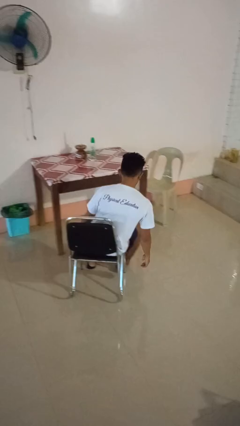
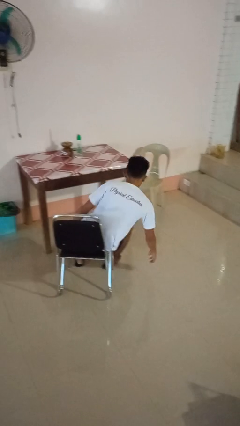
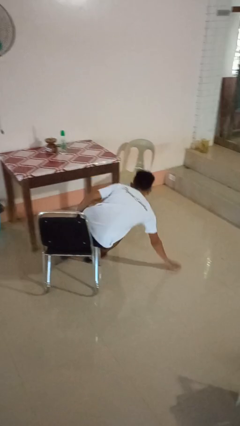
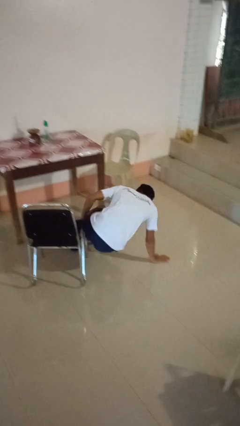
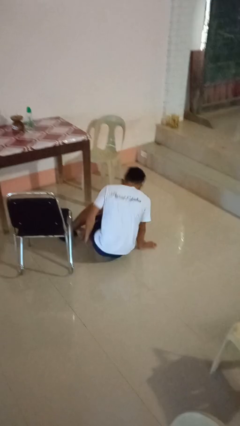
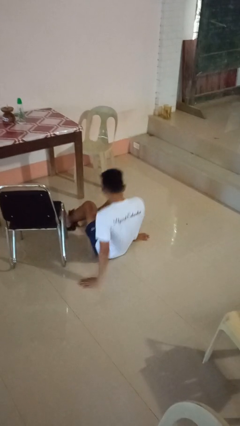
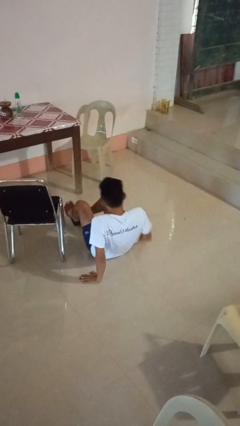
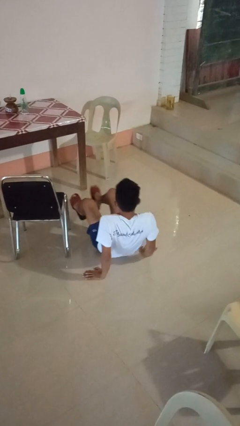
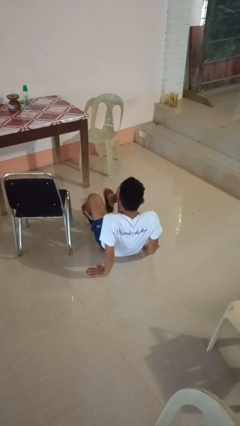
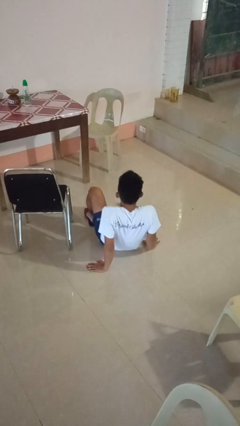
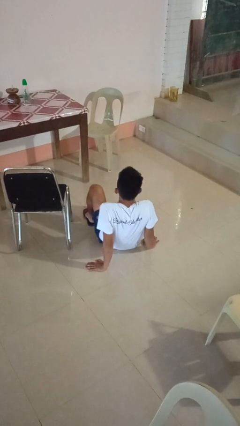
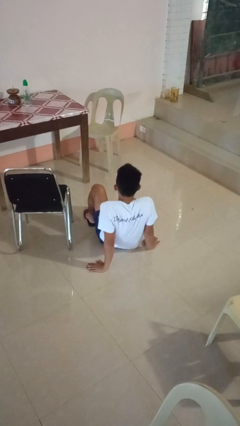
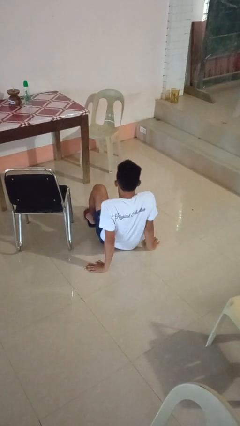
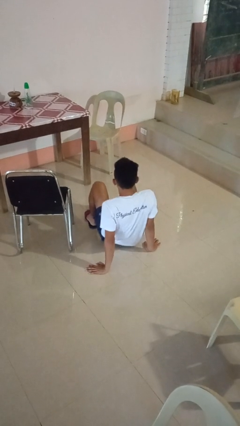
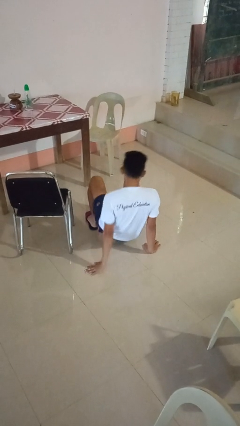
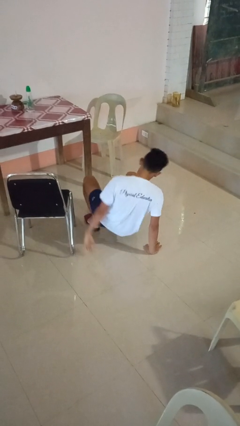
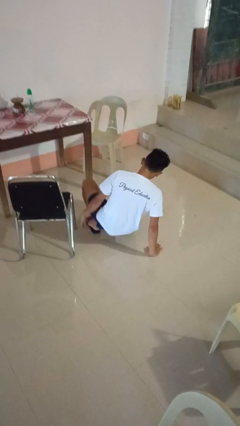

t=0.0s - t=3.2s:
person falls from chair

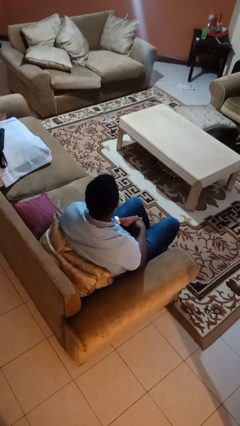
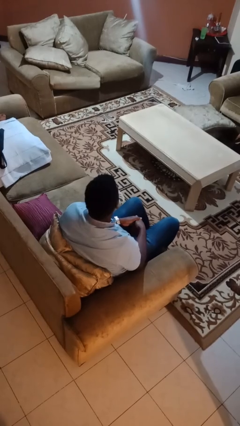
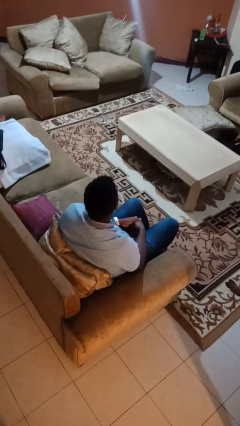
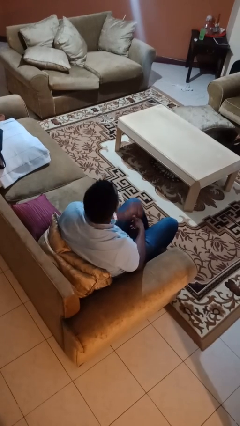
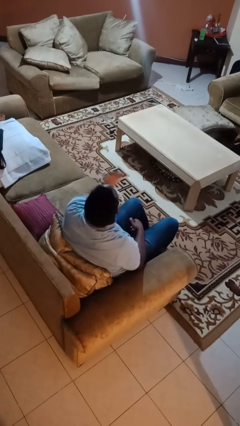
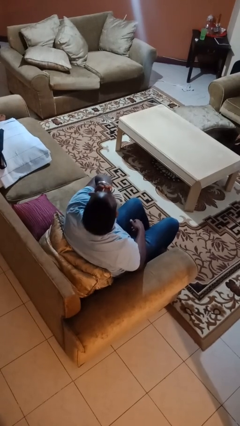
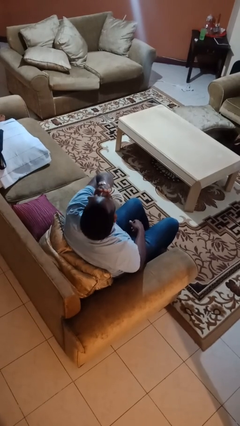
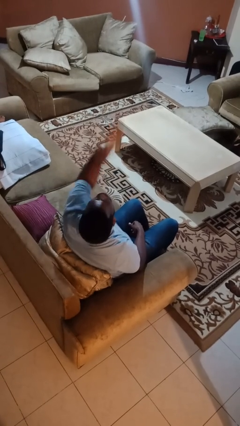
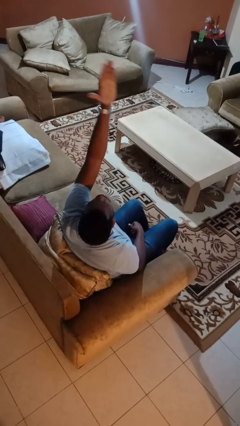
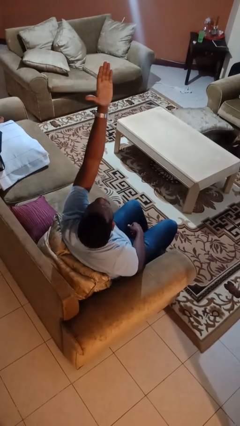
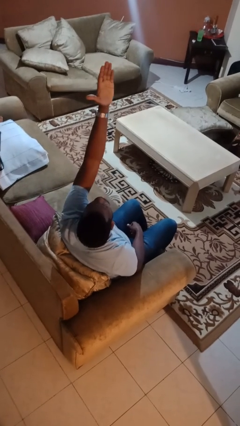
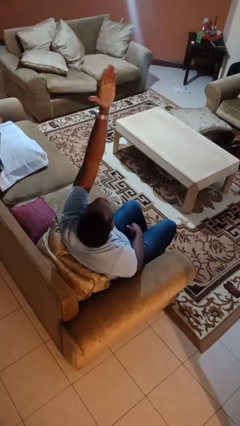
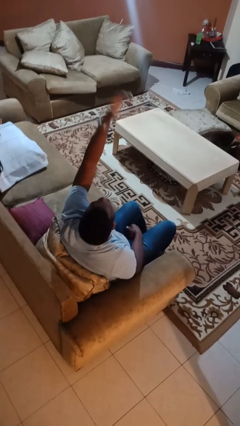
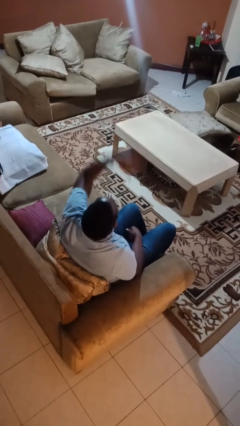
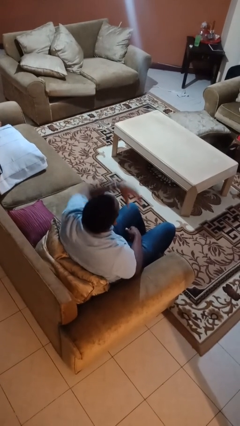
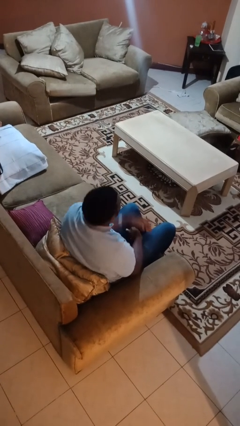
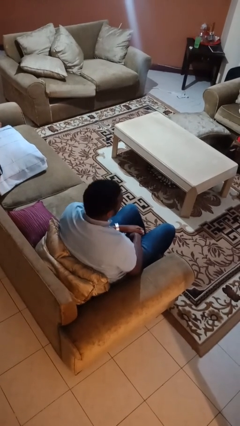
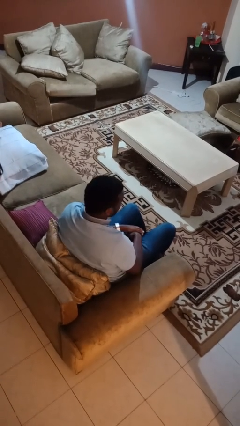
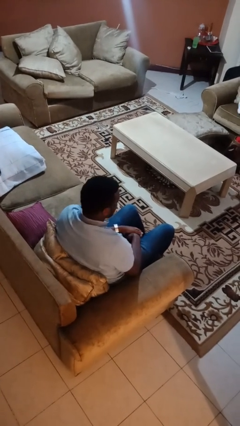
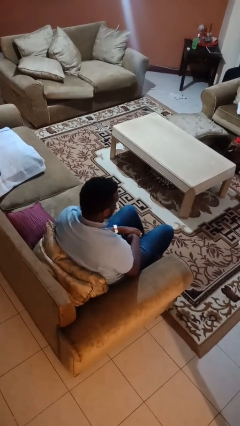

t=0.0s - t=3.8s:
person gestures blow kiss

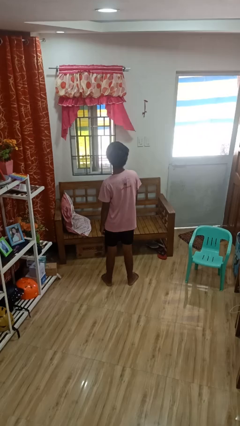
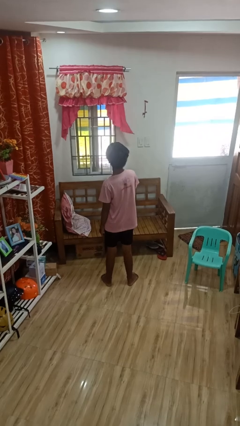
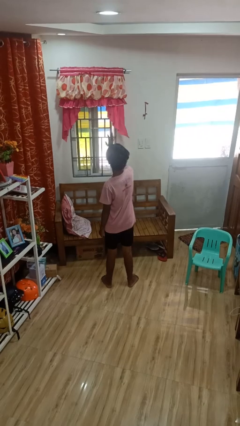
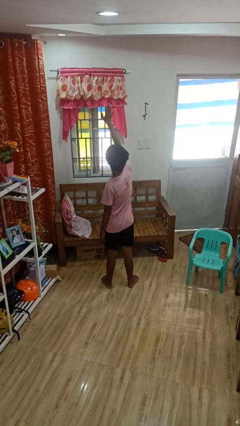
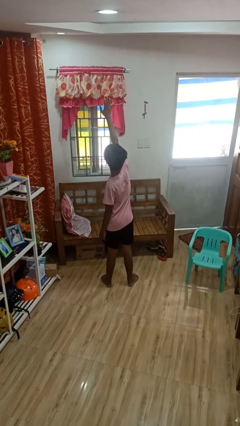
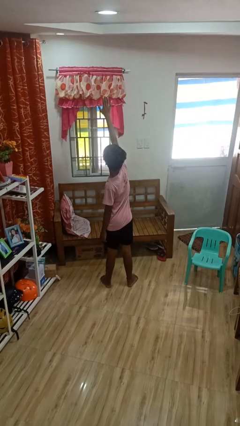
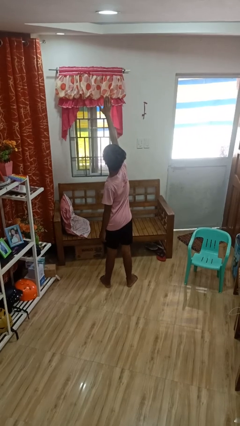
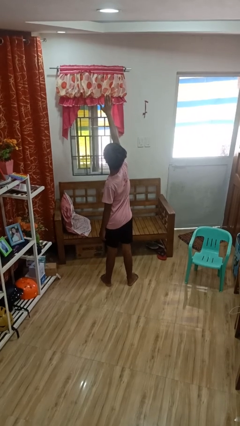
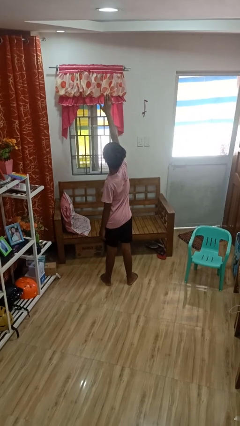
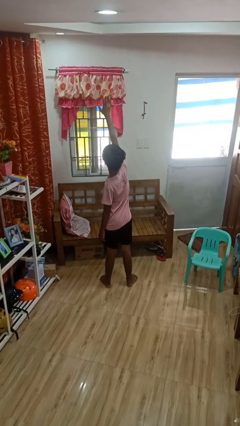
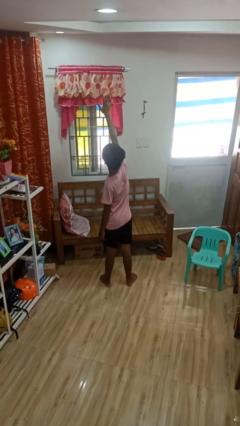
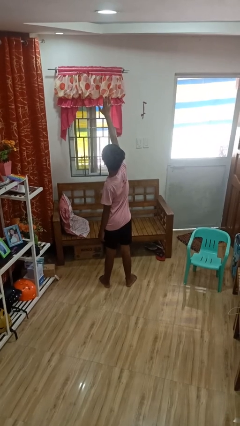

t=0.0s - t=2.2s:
person gestures stop

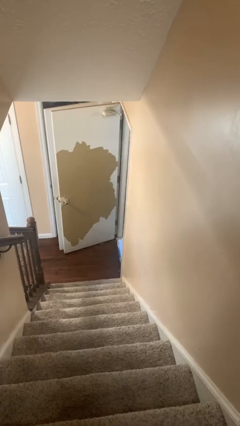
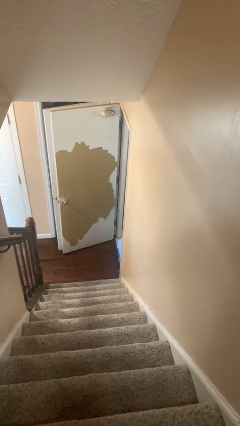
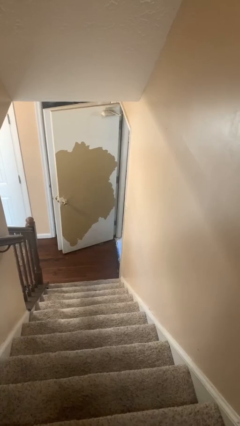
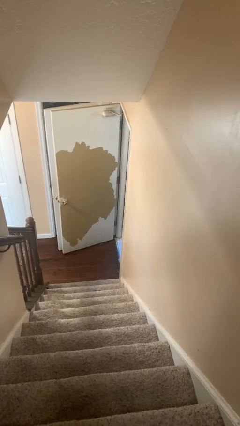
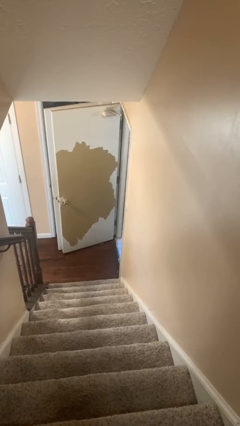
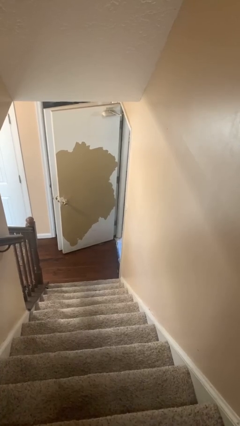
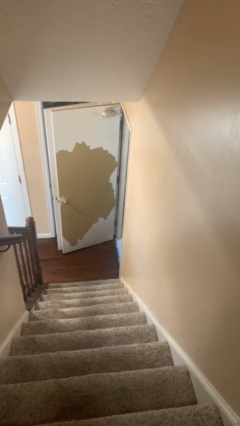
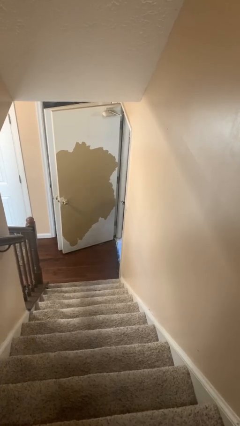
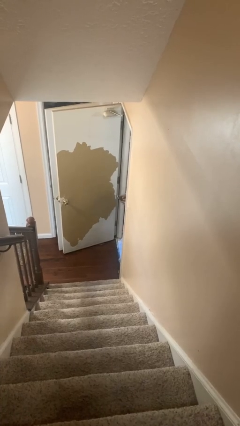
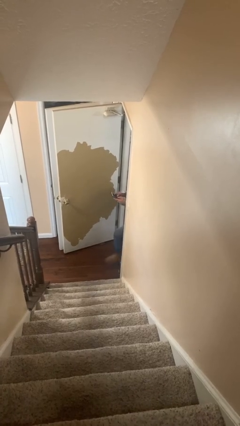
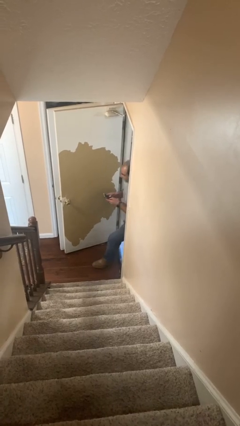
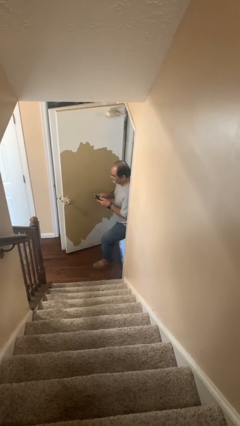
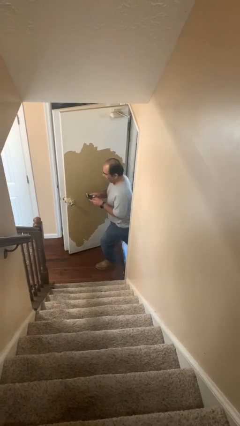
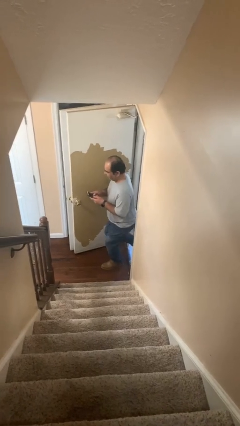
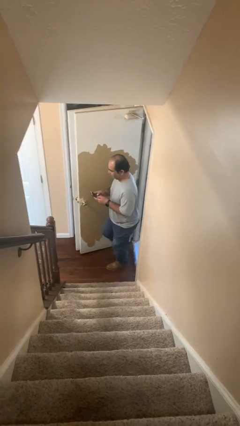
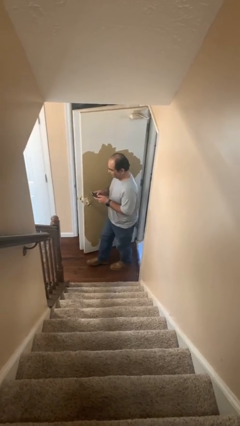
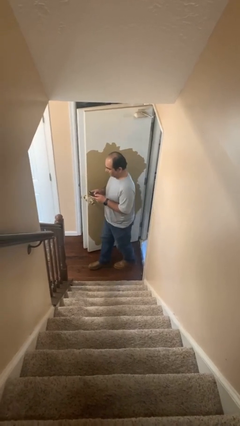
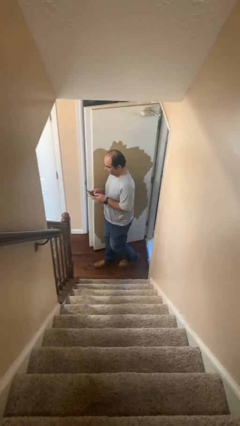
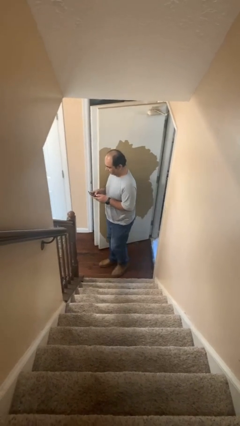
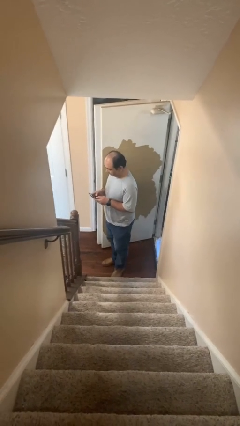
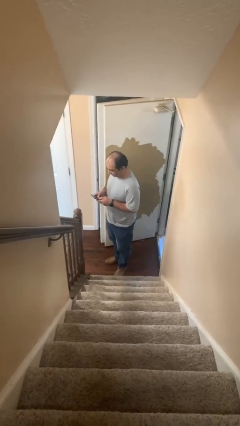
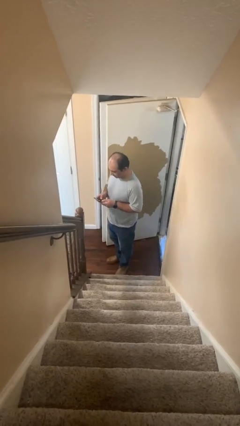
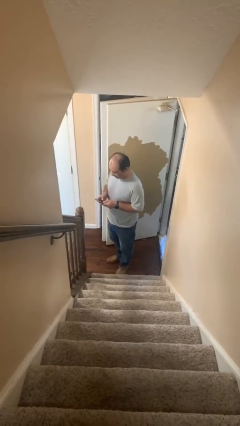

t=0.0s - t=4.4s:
person enters scene through structure

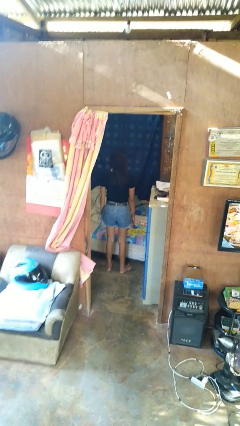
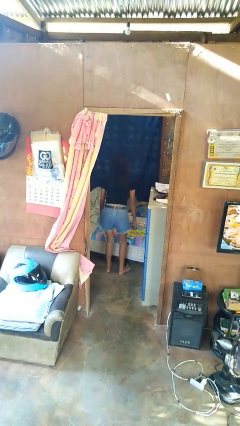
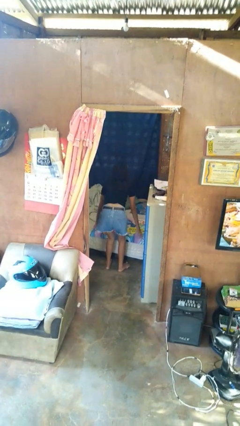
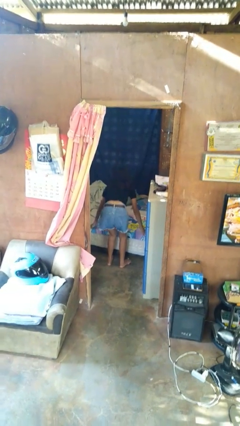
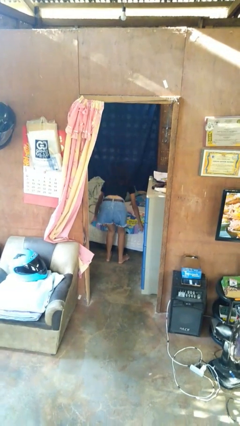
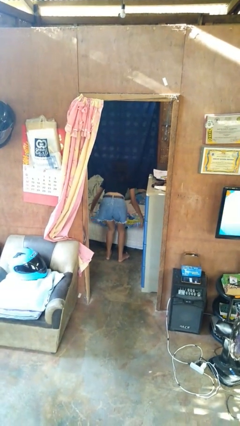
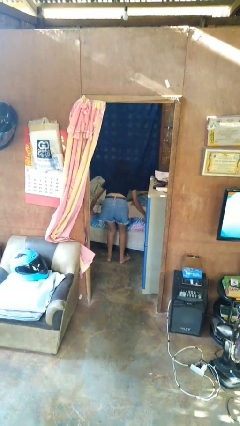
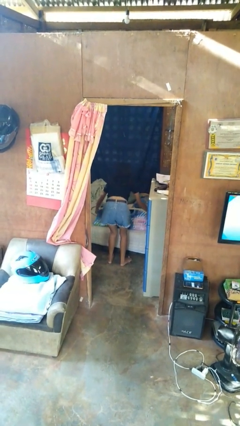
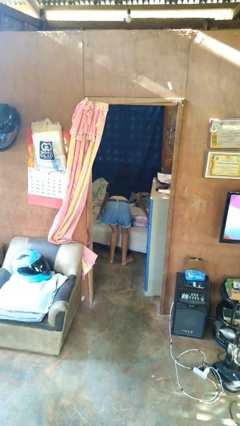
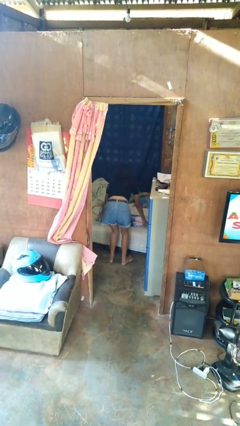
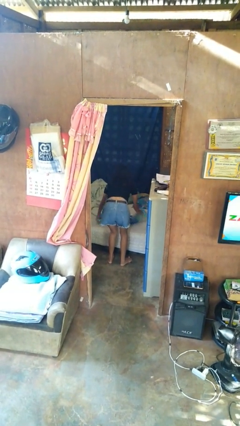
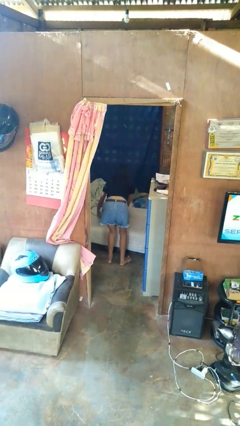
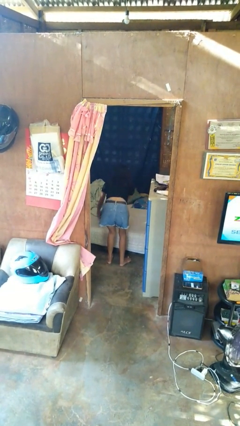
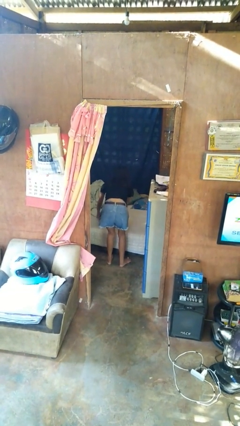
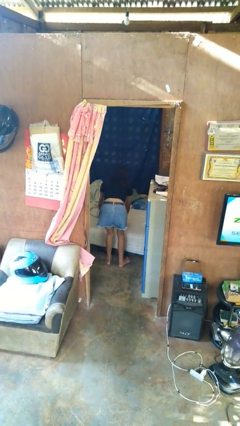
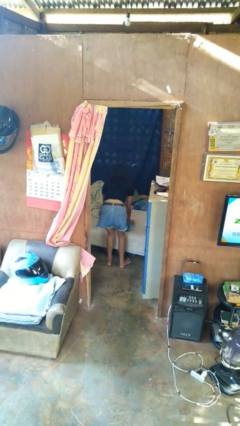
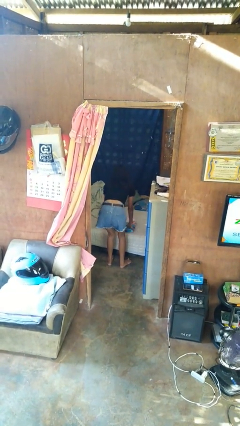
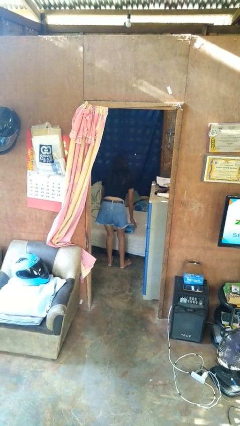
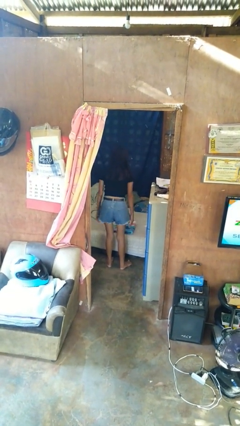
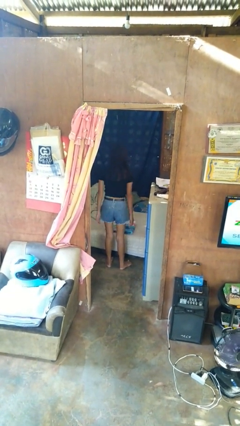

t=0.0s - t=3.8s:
person folds blanket

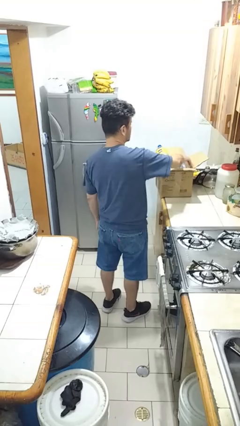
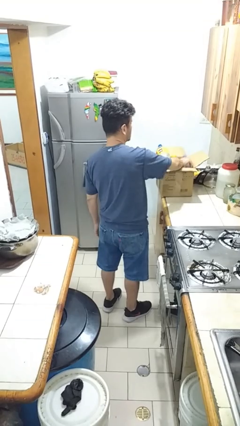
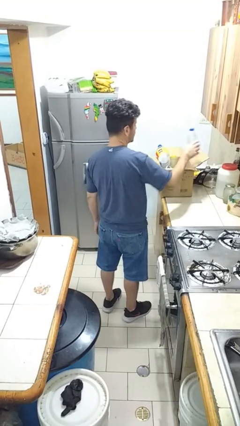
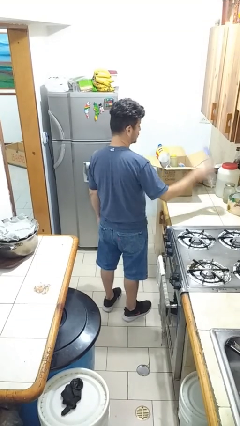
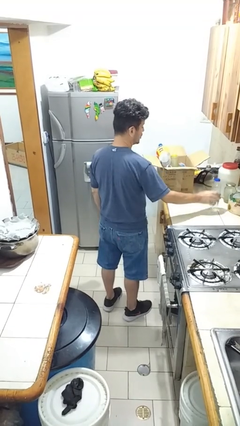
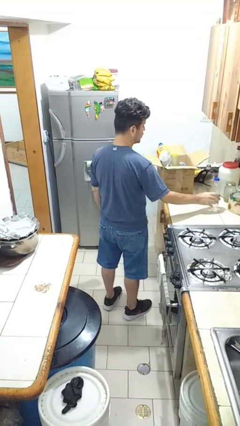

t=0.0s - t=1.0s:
person takes object from box
